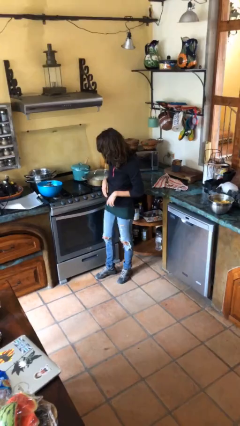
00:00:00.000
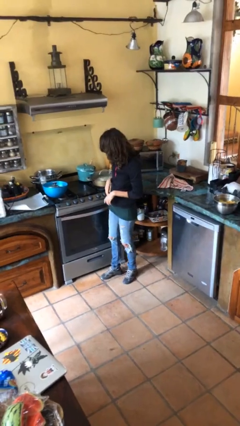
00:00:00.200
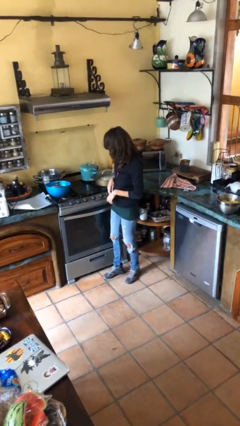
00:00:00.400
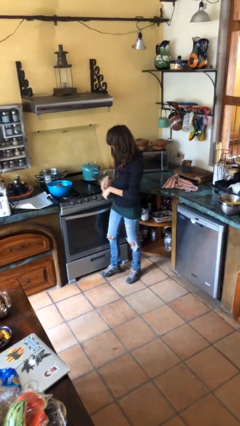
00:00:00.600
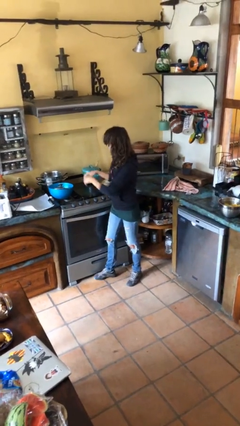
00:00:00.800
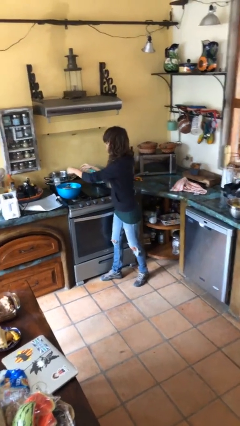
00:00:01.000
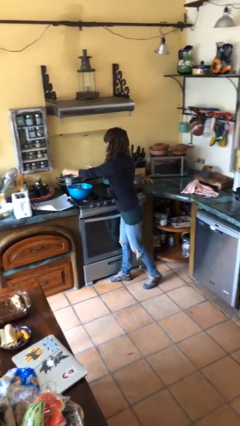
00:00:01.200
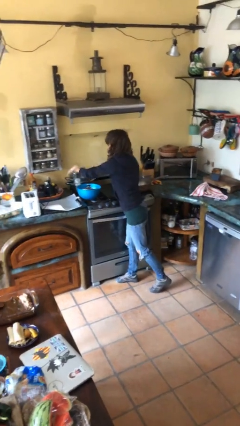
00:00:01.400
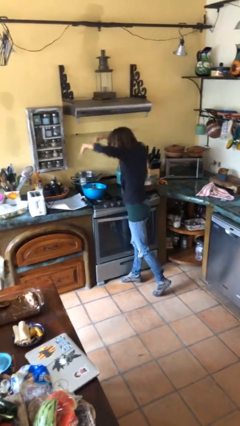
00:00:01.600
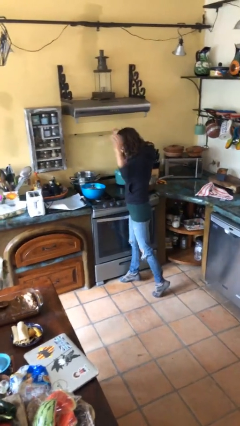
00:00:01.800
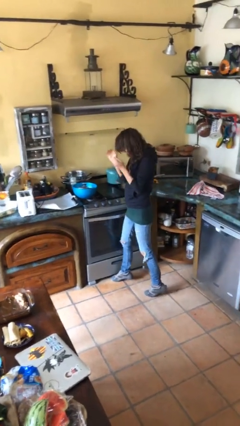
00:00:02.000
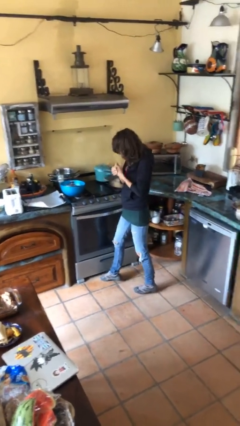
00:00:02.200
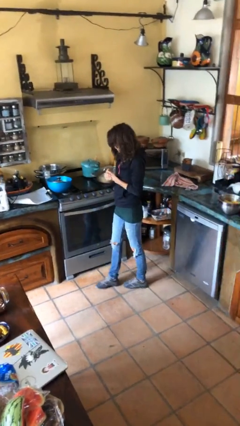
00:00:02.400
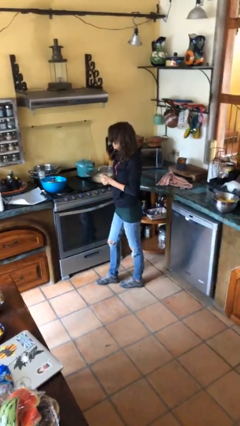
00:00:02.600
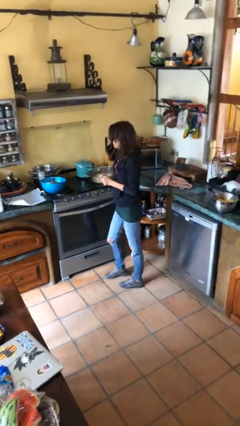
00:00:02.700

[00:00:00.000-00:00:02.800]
person burns hand

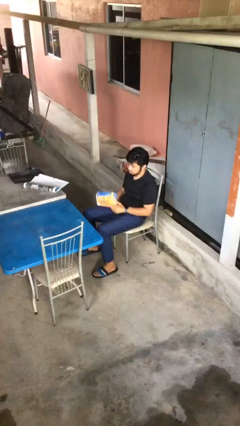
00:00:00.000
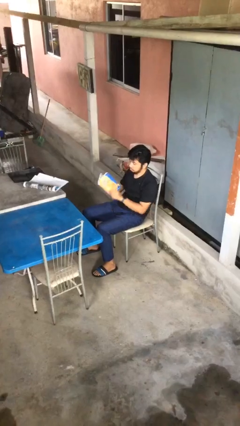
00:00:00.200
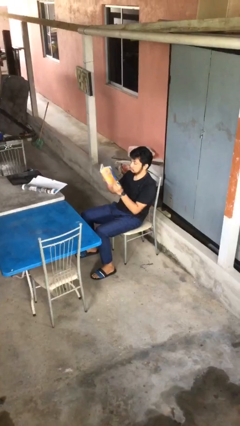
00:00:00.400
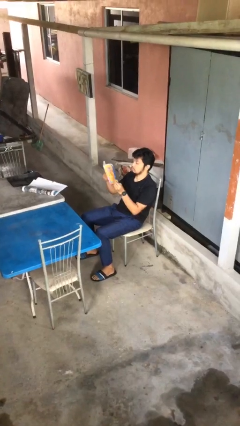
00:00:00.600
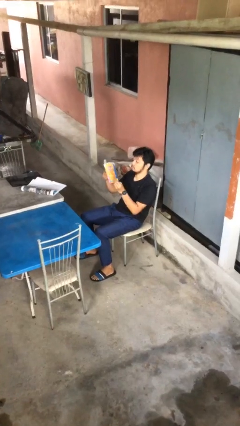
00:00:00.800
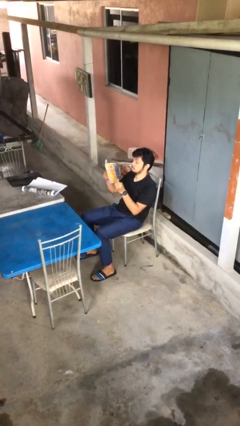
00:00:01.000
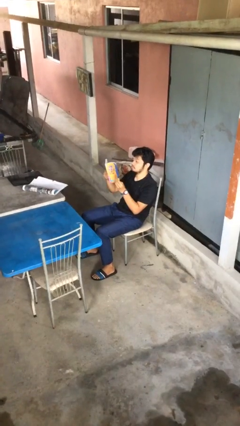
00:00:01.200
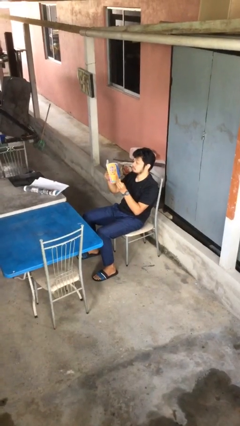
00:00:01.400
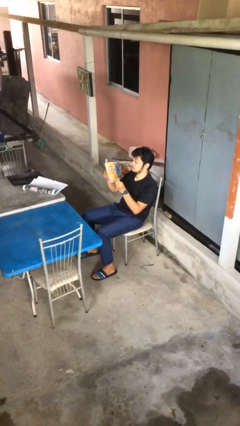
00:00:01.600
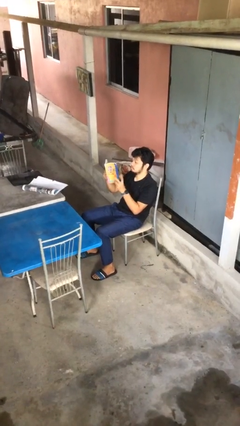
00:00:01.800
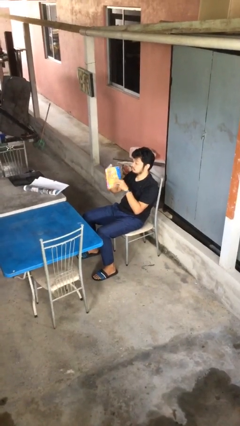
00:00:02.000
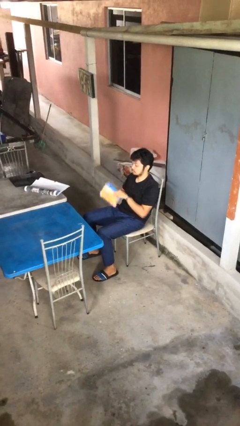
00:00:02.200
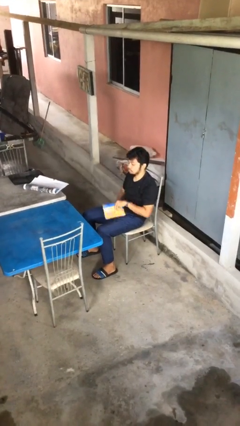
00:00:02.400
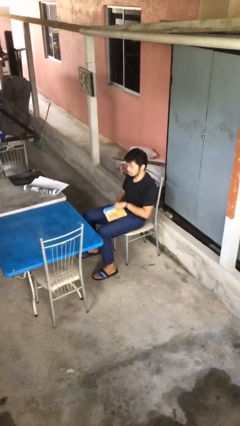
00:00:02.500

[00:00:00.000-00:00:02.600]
person reads book

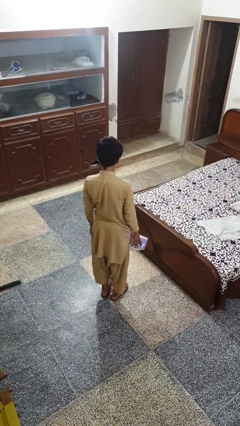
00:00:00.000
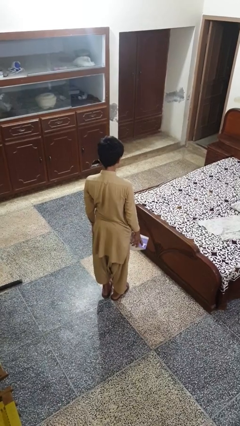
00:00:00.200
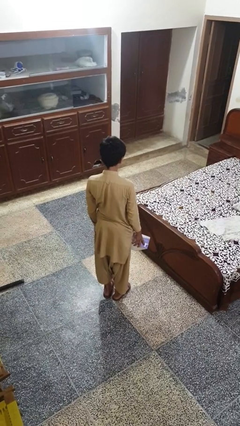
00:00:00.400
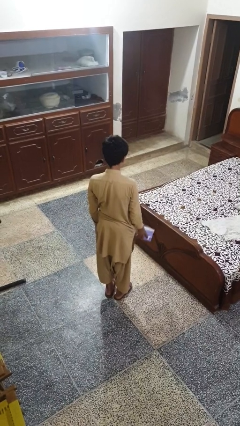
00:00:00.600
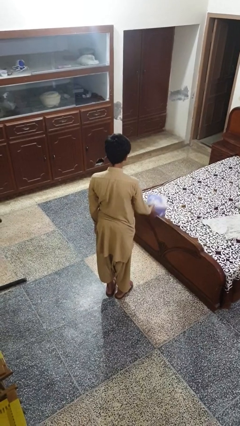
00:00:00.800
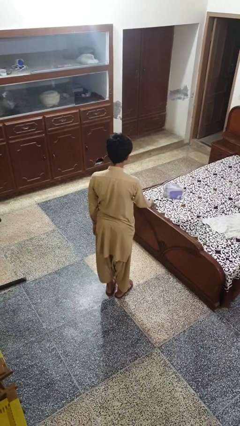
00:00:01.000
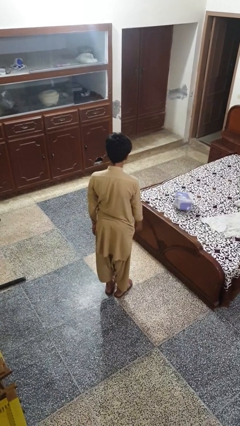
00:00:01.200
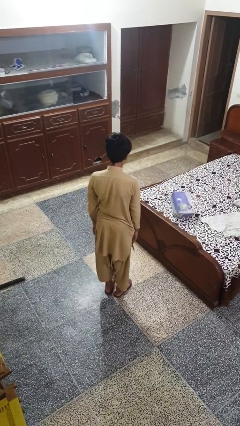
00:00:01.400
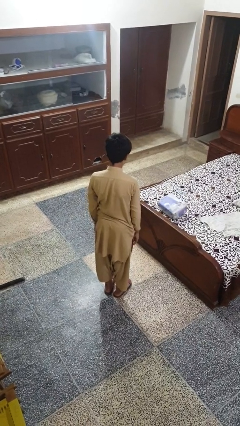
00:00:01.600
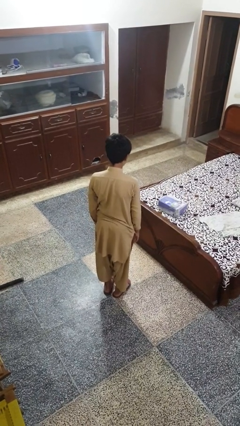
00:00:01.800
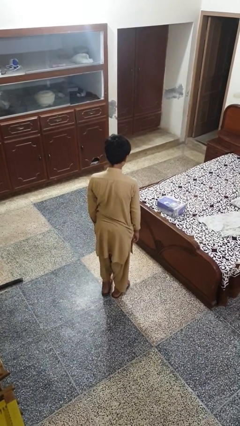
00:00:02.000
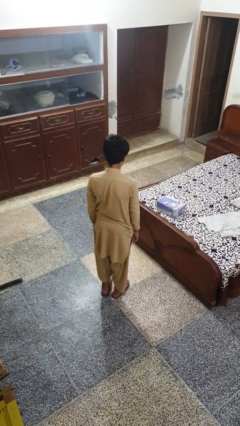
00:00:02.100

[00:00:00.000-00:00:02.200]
person throws object on bed

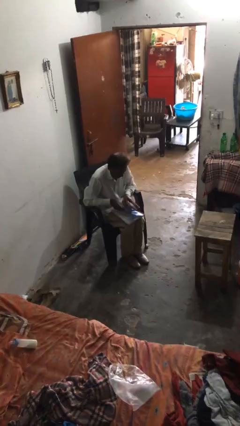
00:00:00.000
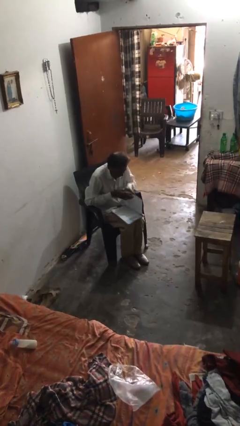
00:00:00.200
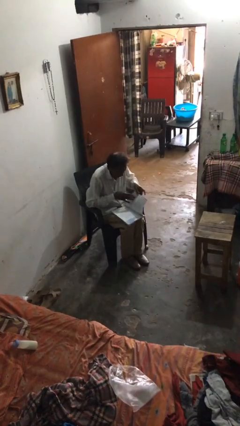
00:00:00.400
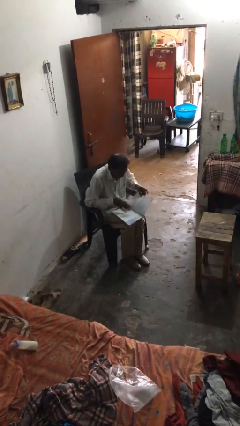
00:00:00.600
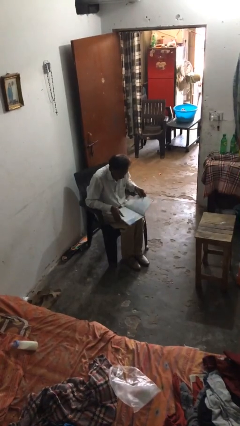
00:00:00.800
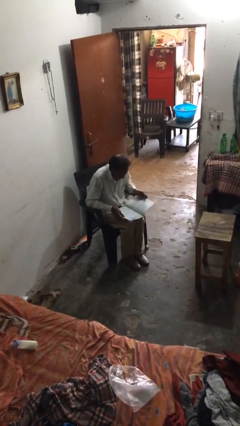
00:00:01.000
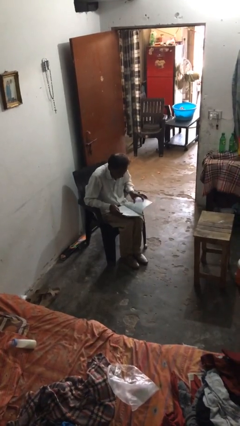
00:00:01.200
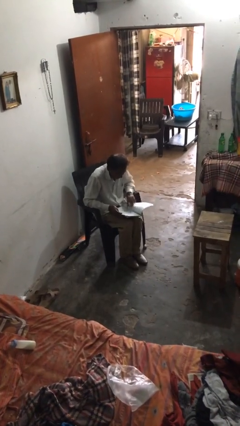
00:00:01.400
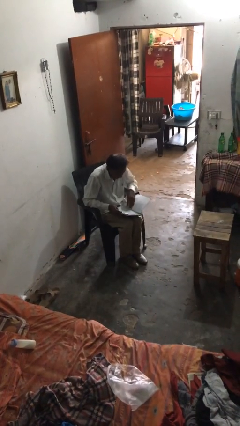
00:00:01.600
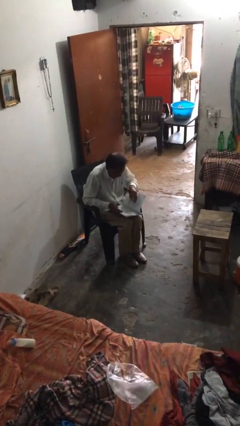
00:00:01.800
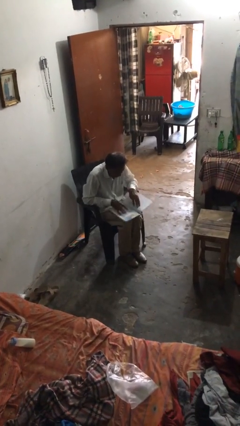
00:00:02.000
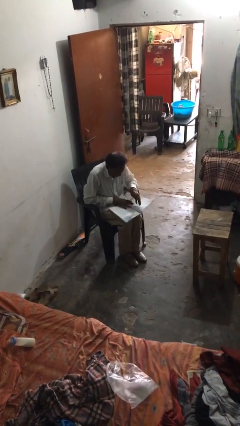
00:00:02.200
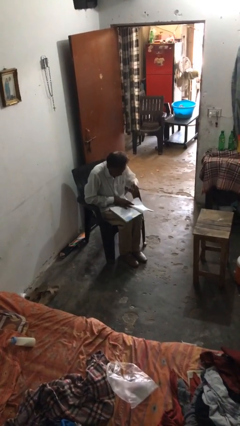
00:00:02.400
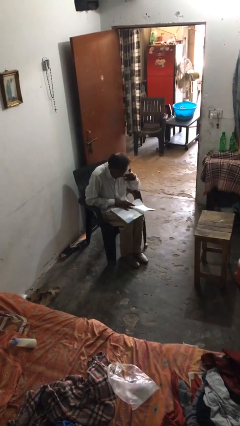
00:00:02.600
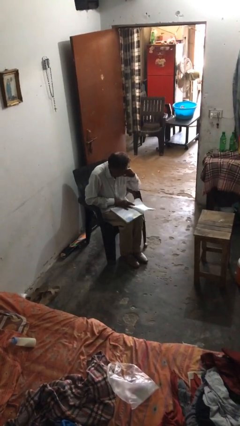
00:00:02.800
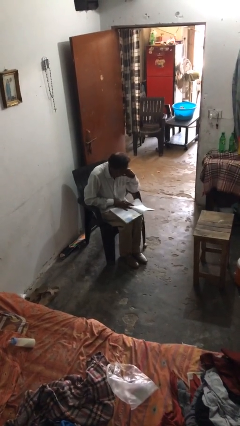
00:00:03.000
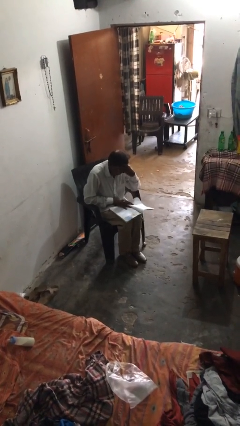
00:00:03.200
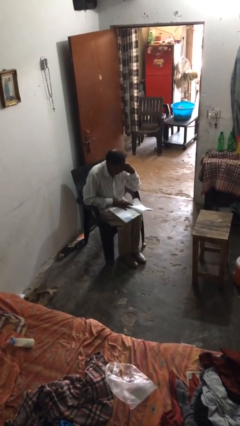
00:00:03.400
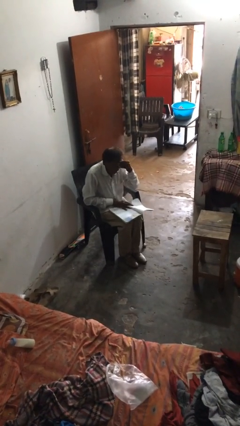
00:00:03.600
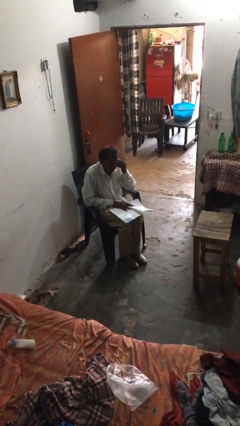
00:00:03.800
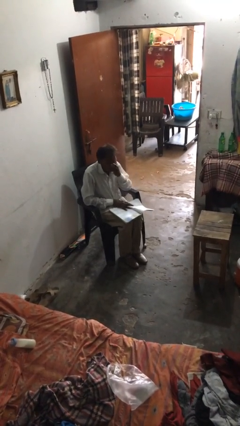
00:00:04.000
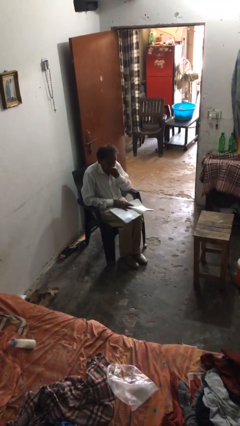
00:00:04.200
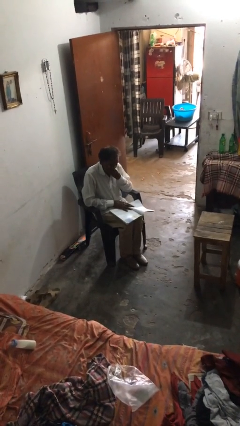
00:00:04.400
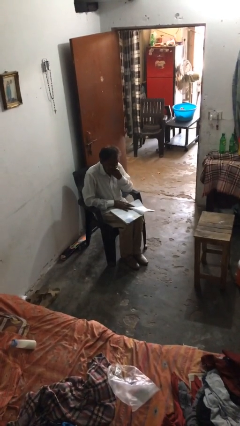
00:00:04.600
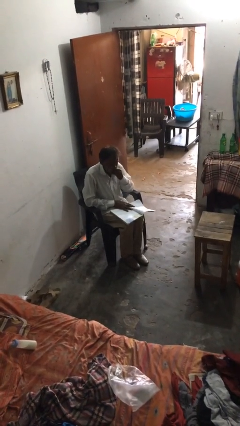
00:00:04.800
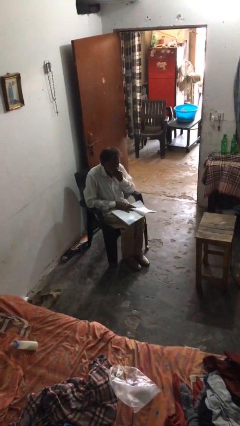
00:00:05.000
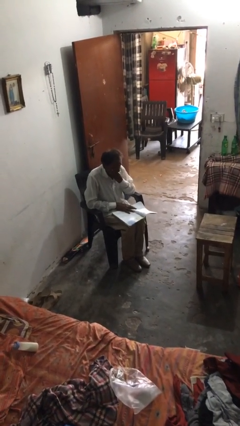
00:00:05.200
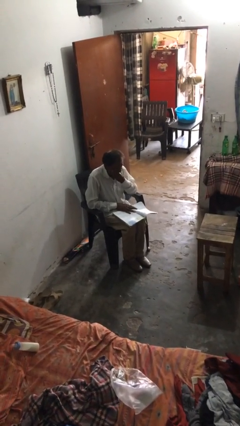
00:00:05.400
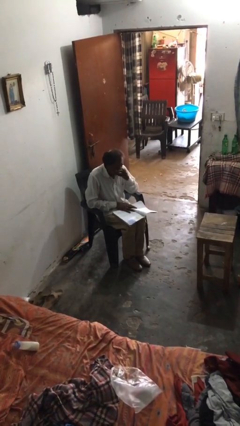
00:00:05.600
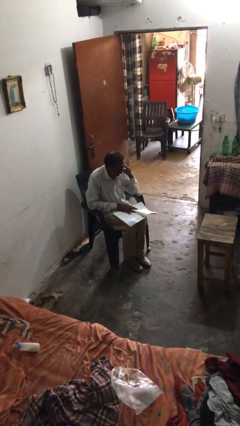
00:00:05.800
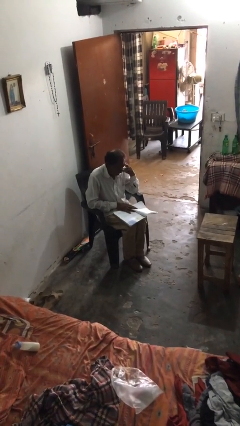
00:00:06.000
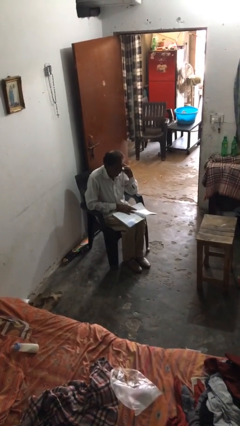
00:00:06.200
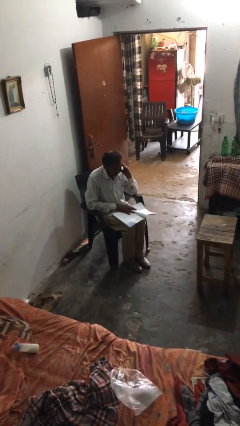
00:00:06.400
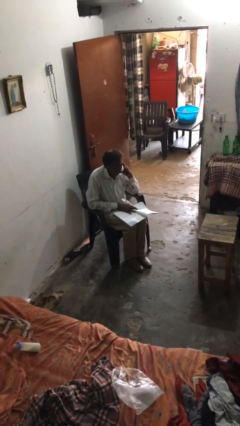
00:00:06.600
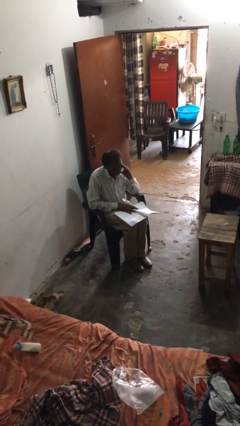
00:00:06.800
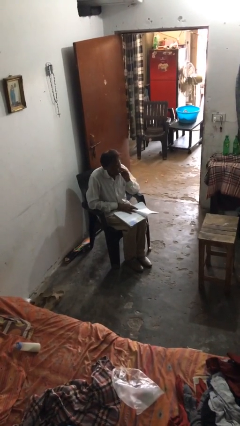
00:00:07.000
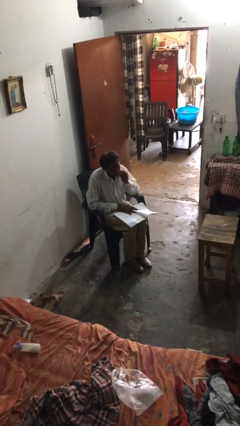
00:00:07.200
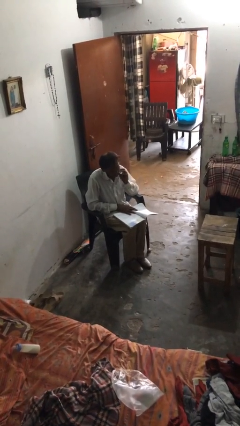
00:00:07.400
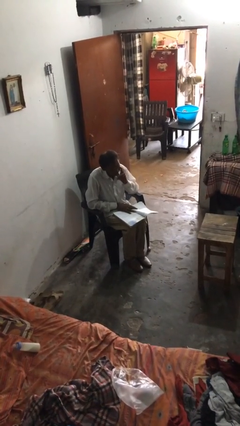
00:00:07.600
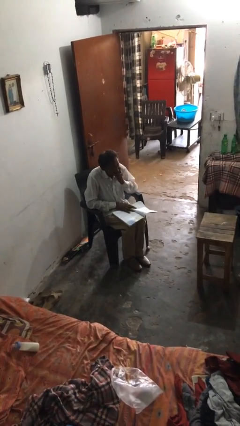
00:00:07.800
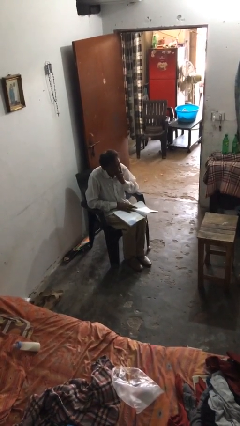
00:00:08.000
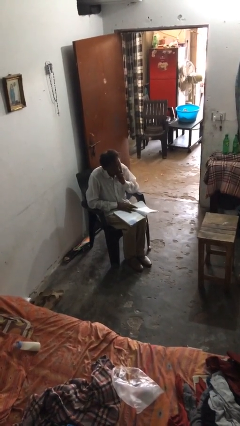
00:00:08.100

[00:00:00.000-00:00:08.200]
person reads document

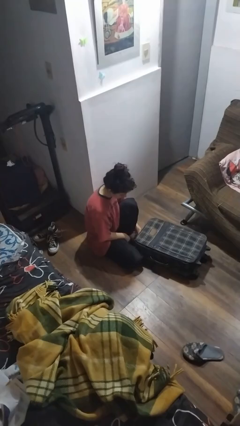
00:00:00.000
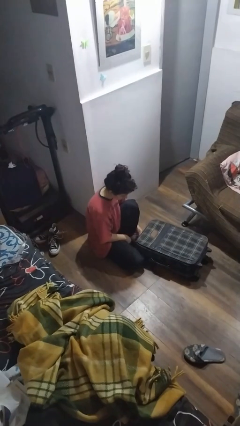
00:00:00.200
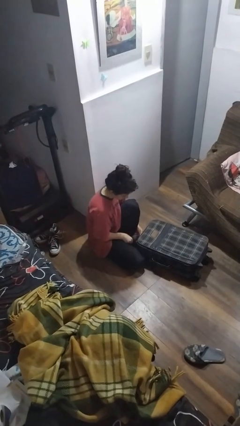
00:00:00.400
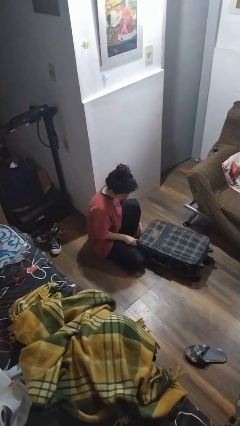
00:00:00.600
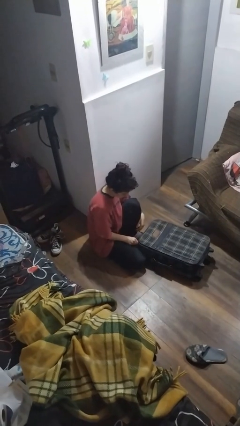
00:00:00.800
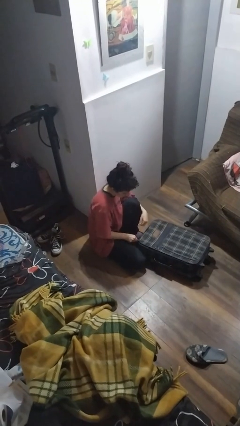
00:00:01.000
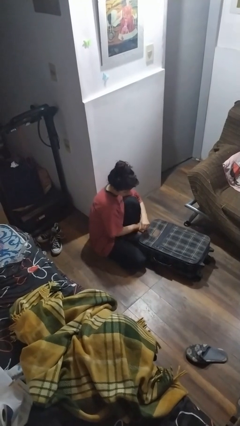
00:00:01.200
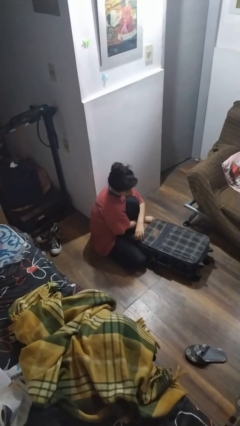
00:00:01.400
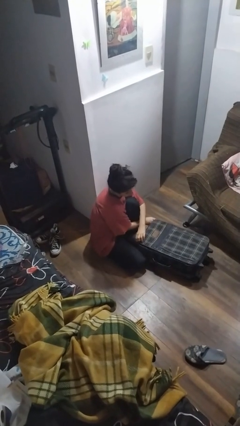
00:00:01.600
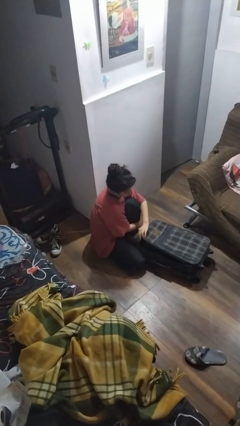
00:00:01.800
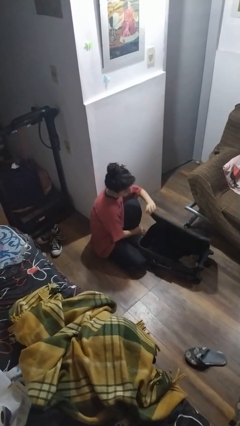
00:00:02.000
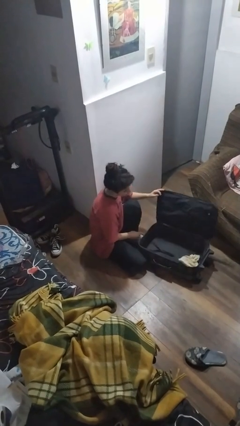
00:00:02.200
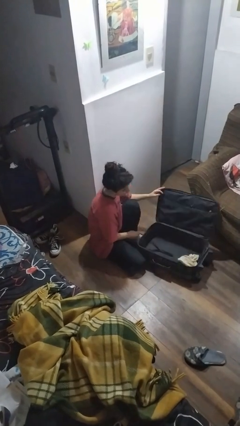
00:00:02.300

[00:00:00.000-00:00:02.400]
person opens suitcase
